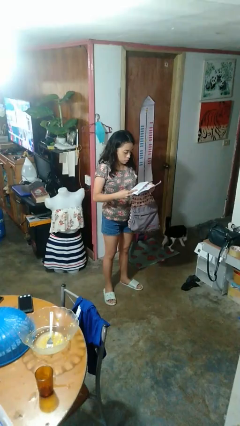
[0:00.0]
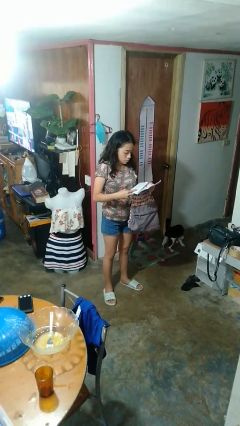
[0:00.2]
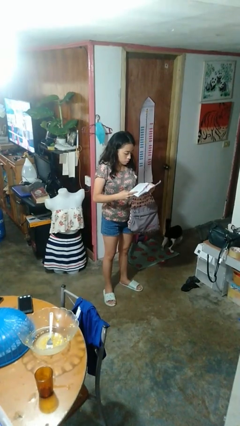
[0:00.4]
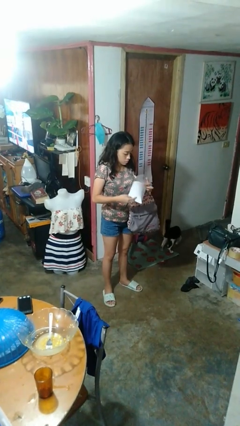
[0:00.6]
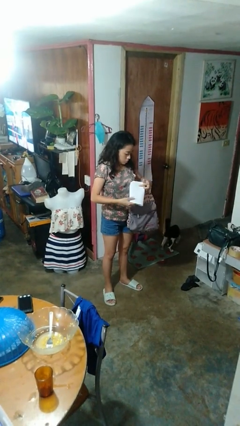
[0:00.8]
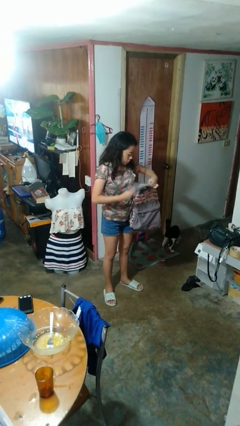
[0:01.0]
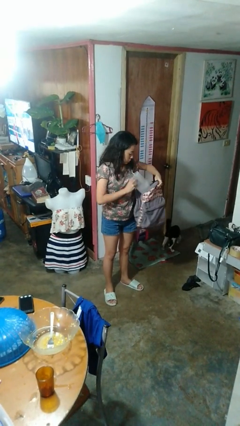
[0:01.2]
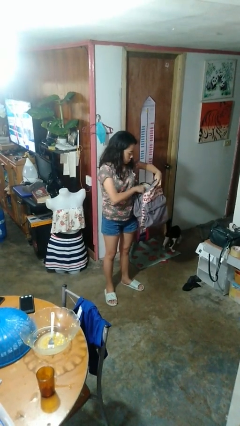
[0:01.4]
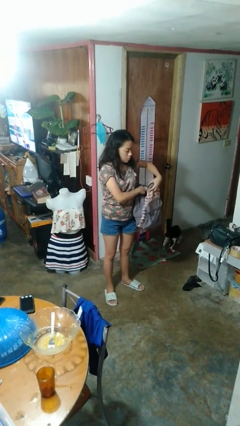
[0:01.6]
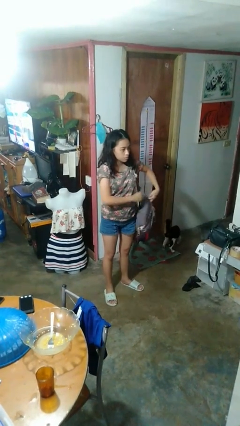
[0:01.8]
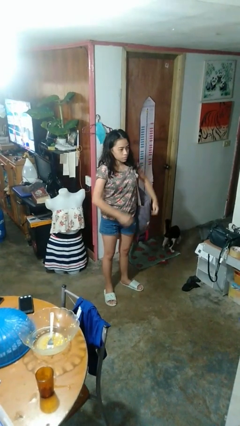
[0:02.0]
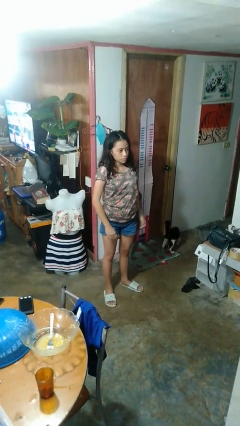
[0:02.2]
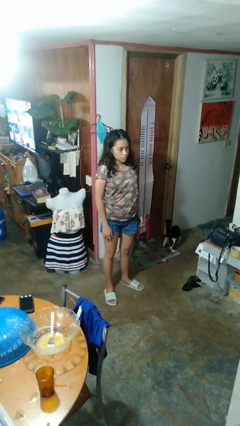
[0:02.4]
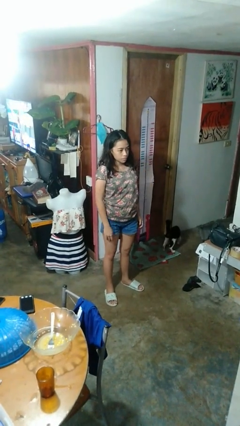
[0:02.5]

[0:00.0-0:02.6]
person puts object into backpack

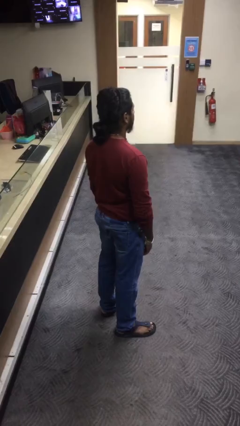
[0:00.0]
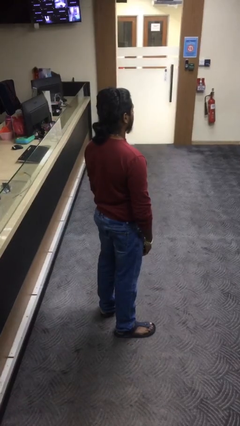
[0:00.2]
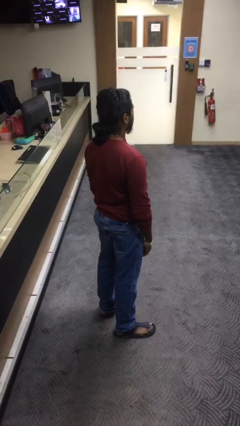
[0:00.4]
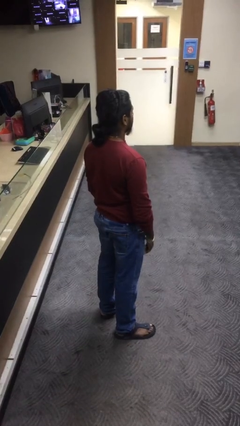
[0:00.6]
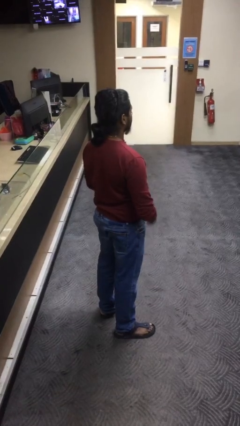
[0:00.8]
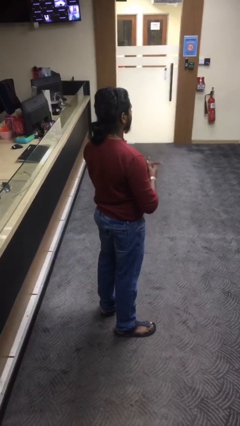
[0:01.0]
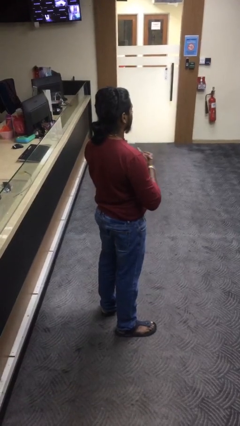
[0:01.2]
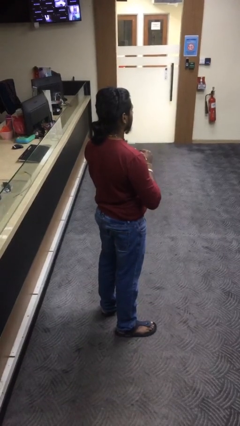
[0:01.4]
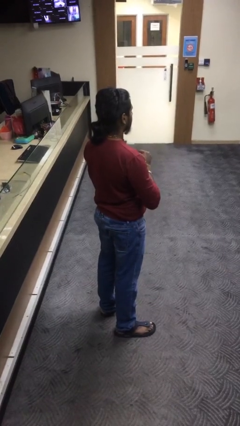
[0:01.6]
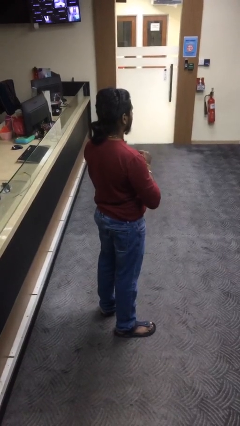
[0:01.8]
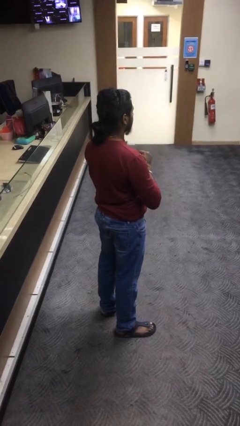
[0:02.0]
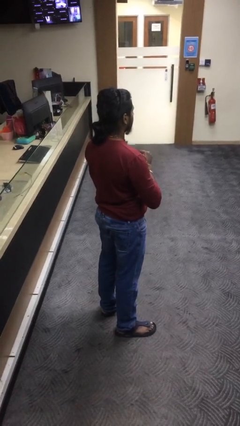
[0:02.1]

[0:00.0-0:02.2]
person cracks knuckles

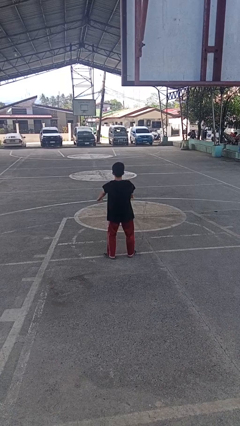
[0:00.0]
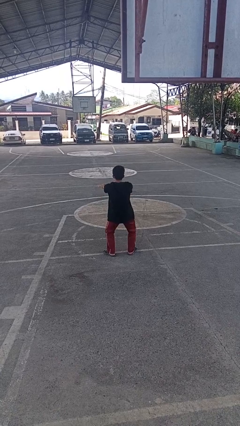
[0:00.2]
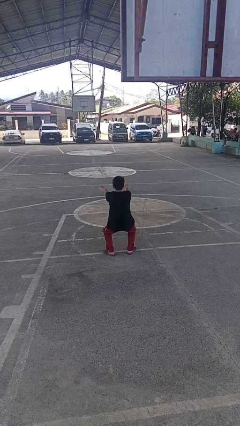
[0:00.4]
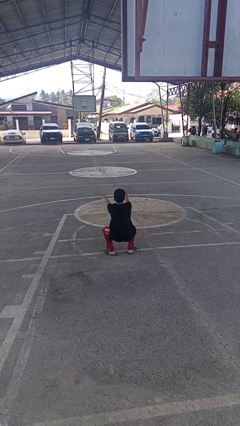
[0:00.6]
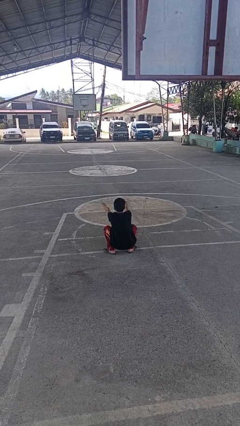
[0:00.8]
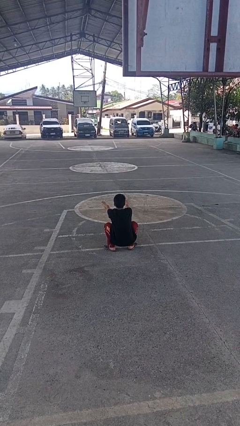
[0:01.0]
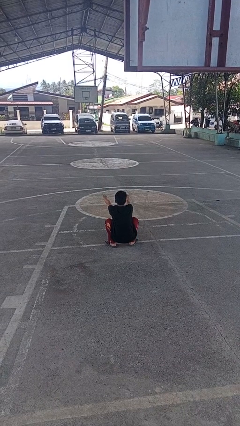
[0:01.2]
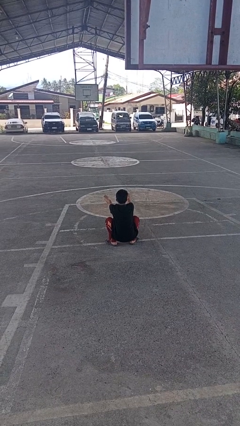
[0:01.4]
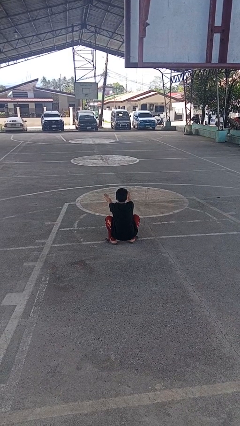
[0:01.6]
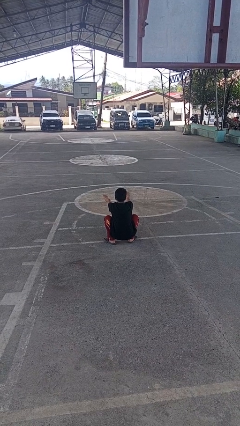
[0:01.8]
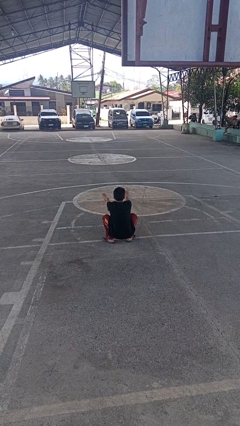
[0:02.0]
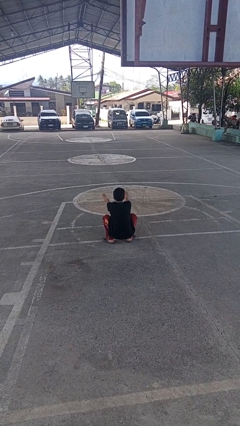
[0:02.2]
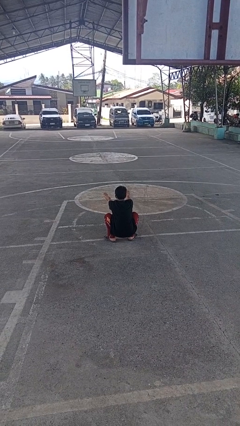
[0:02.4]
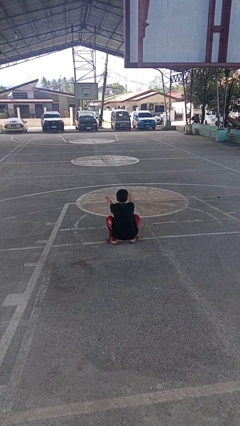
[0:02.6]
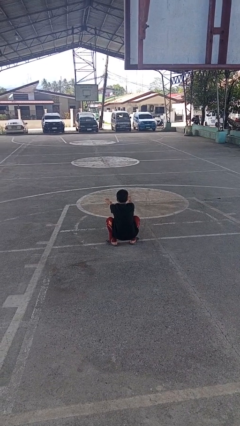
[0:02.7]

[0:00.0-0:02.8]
person squats

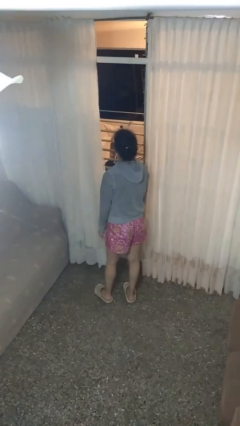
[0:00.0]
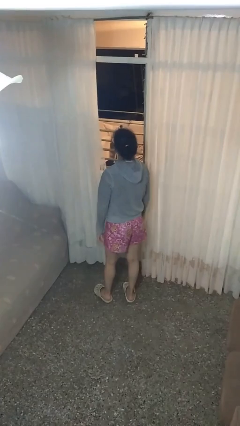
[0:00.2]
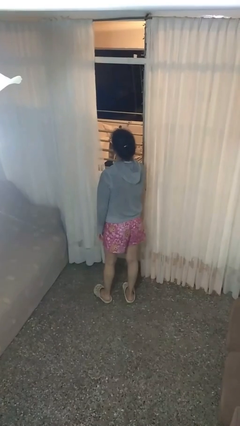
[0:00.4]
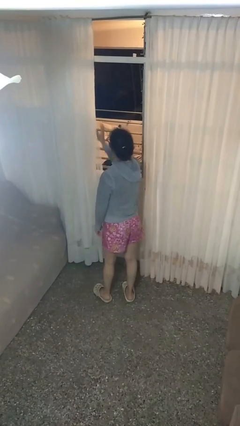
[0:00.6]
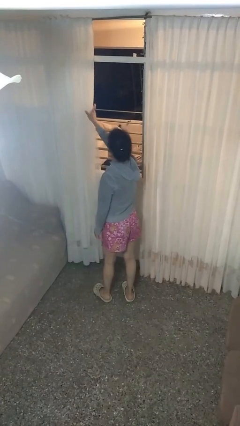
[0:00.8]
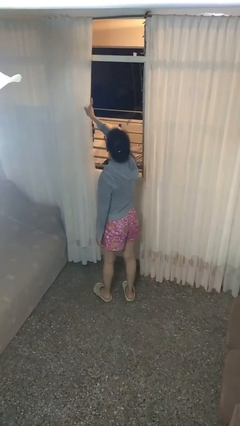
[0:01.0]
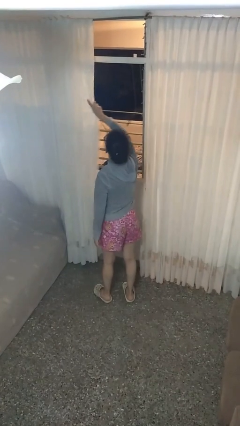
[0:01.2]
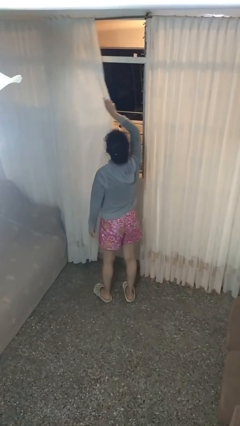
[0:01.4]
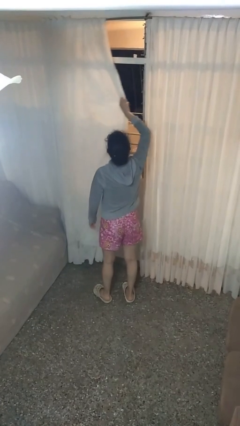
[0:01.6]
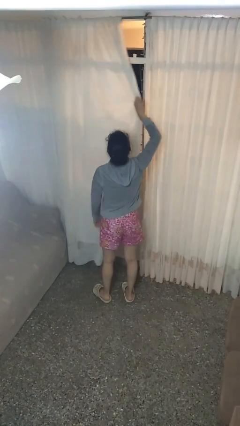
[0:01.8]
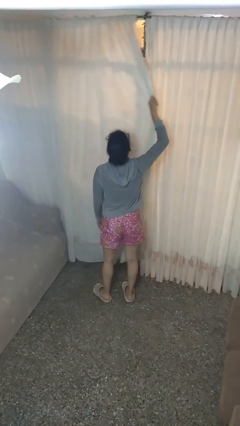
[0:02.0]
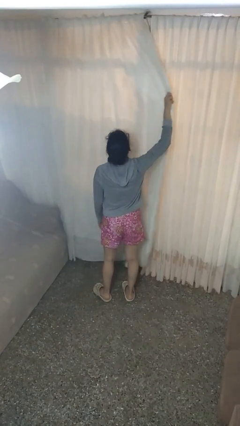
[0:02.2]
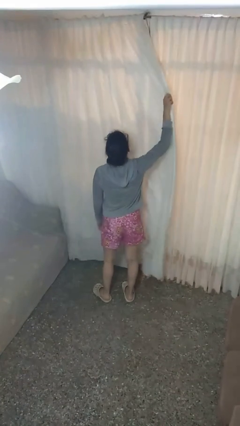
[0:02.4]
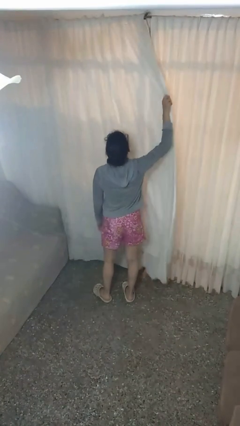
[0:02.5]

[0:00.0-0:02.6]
person closes curtains

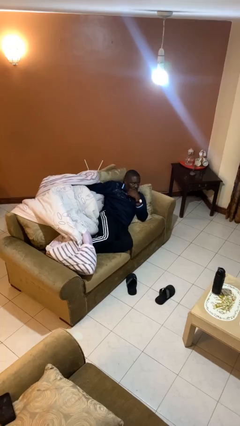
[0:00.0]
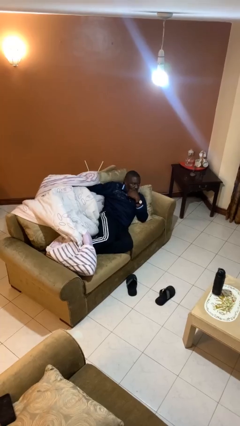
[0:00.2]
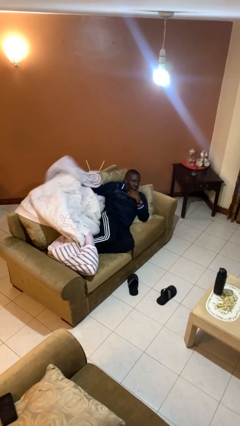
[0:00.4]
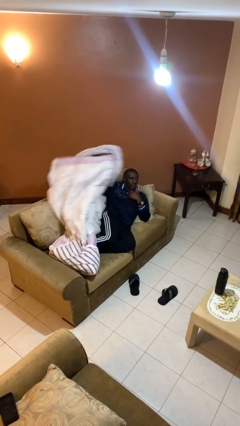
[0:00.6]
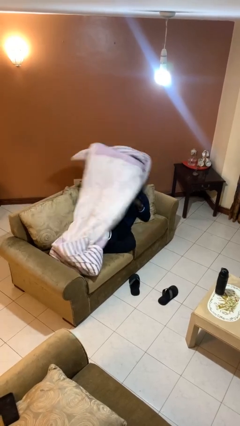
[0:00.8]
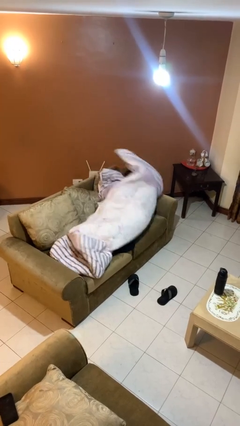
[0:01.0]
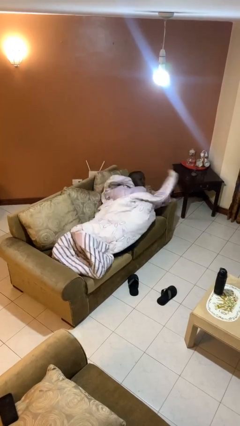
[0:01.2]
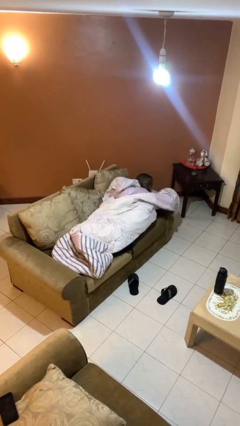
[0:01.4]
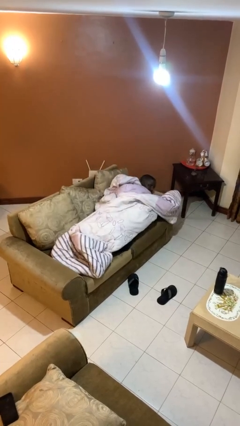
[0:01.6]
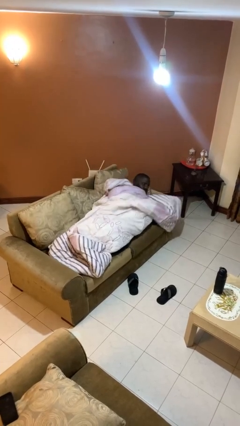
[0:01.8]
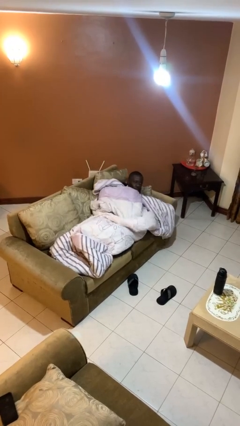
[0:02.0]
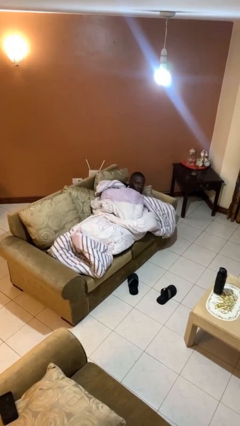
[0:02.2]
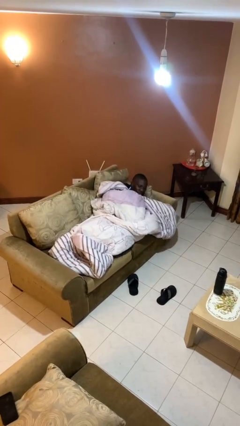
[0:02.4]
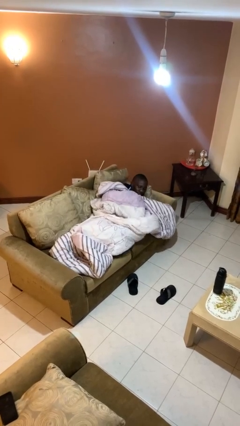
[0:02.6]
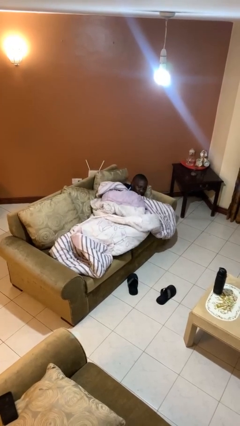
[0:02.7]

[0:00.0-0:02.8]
person covers with blanket

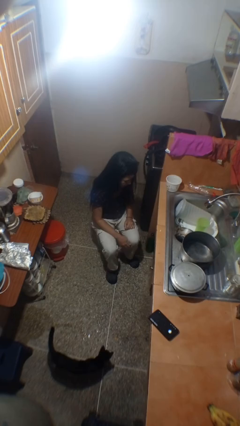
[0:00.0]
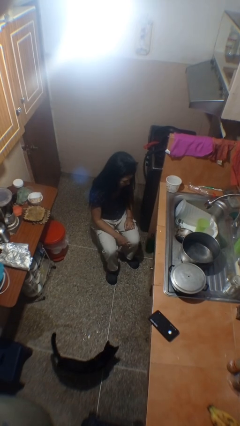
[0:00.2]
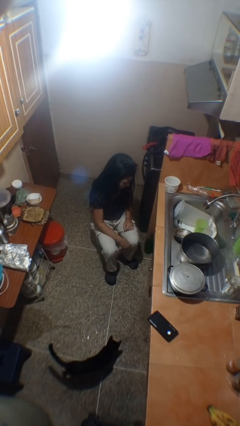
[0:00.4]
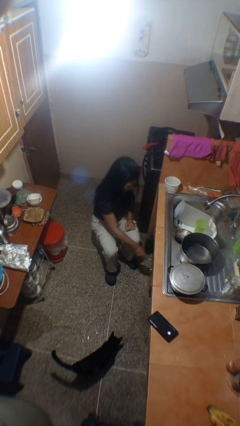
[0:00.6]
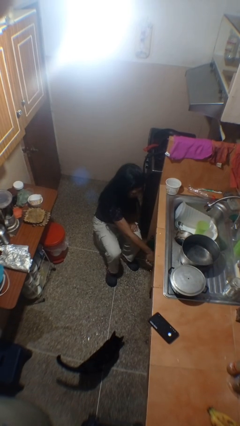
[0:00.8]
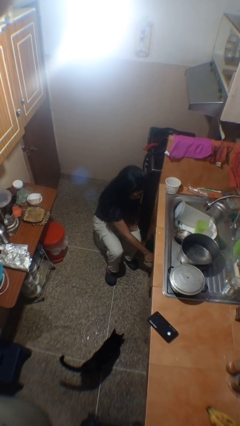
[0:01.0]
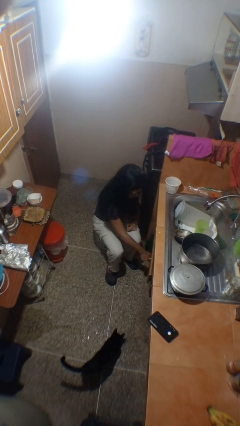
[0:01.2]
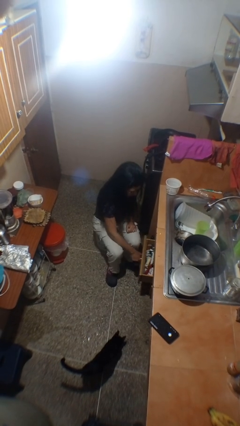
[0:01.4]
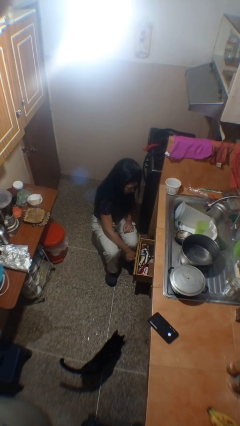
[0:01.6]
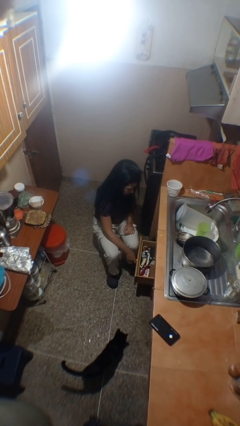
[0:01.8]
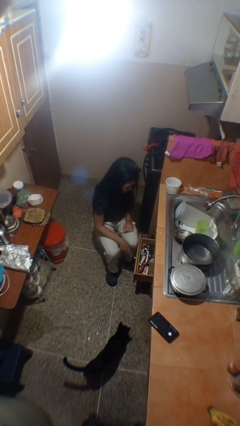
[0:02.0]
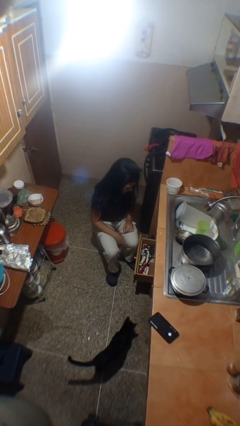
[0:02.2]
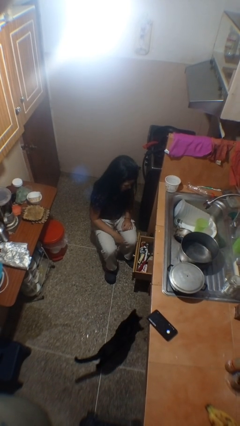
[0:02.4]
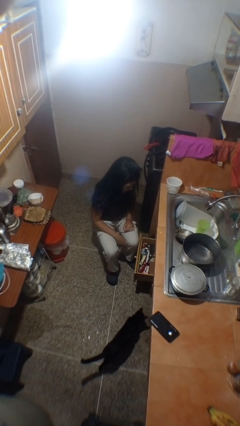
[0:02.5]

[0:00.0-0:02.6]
person opens kitchen drawer

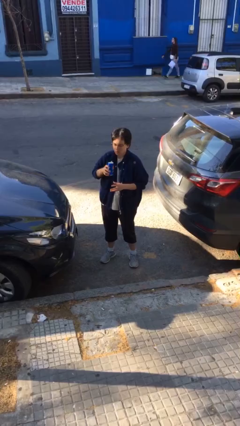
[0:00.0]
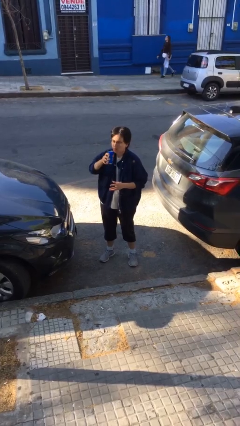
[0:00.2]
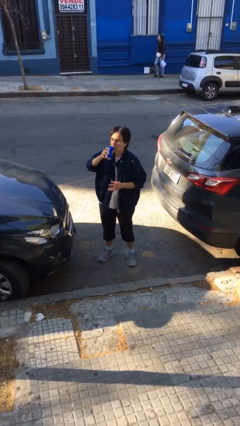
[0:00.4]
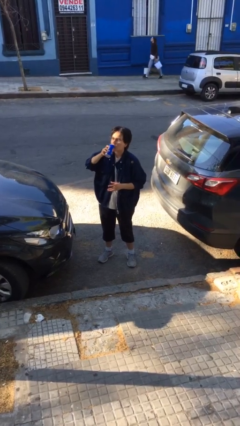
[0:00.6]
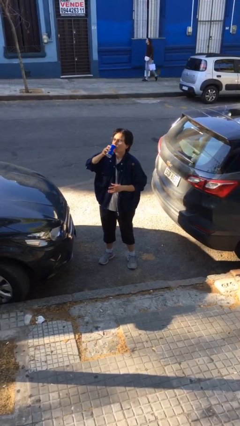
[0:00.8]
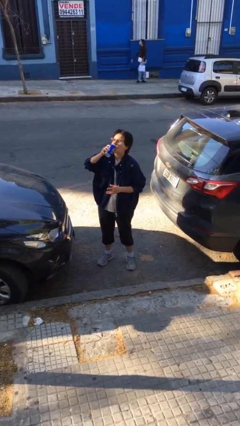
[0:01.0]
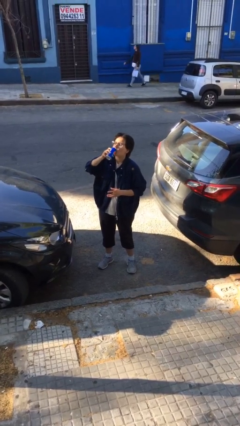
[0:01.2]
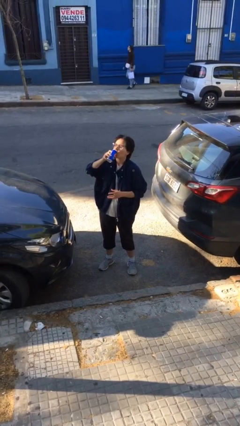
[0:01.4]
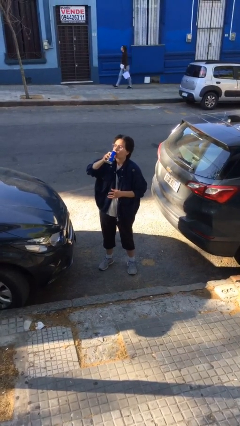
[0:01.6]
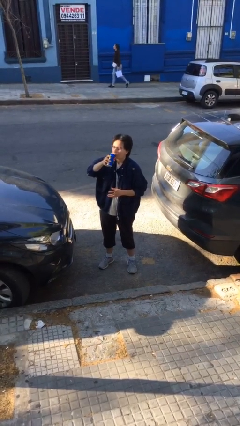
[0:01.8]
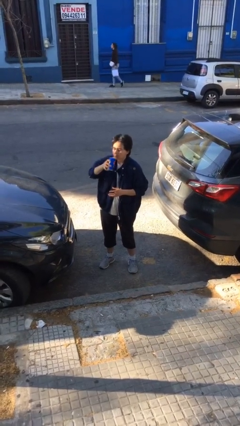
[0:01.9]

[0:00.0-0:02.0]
person drinks from beverage can
